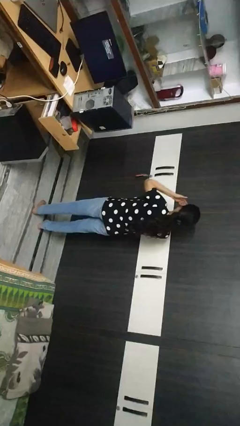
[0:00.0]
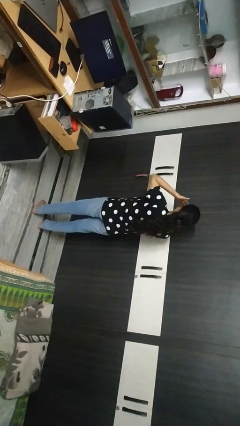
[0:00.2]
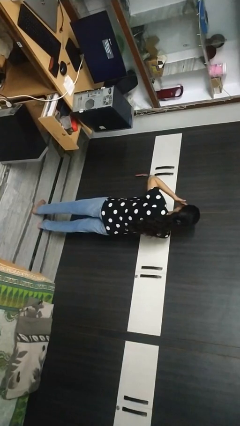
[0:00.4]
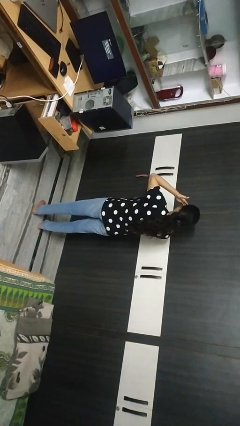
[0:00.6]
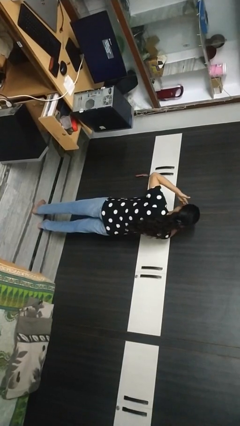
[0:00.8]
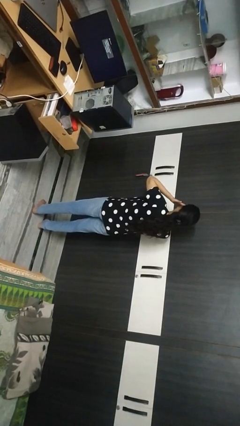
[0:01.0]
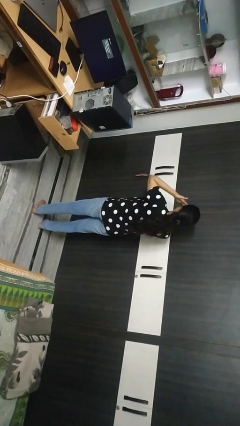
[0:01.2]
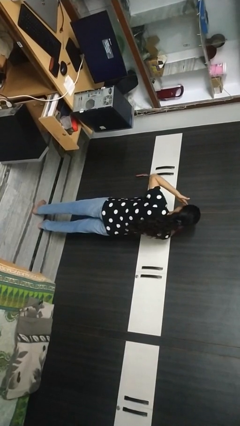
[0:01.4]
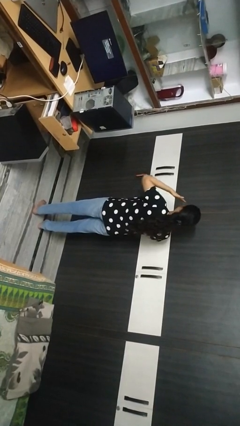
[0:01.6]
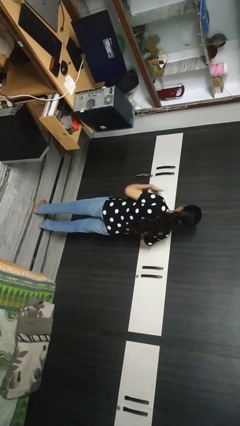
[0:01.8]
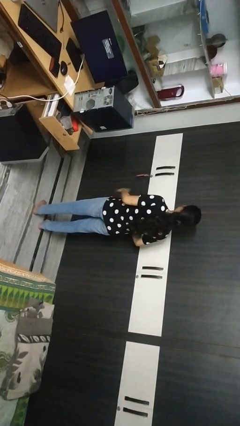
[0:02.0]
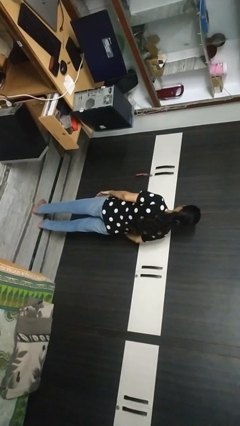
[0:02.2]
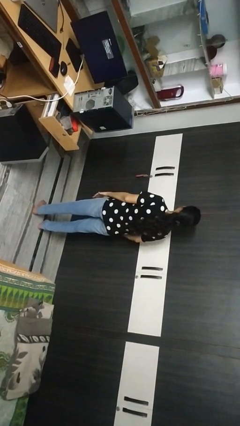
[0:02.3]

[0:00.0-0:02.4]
person rubs eyes

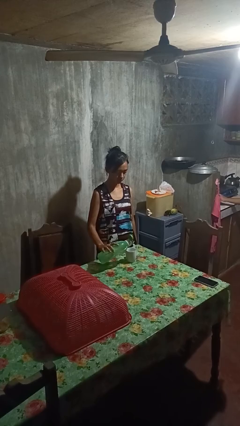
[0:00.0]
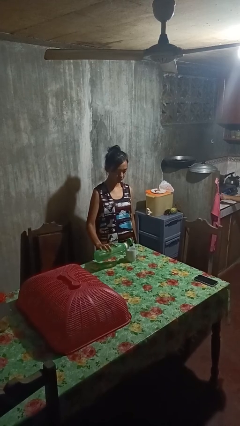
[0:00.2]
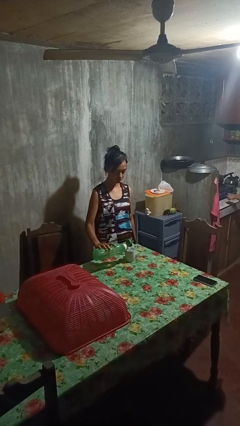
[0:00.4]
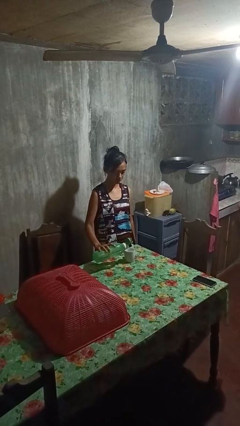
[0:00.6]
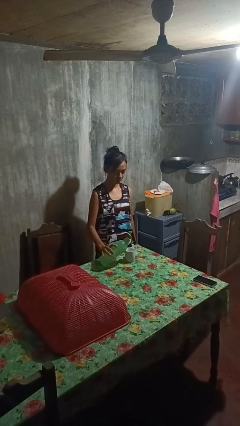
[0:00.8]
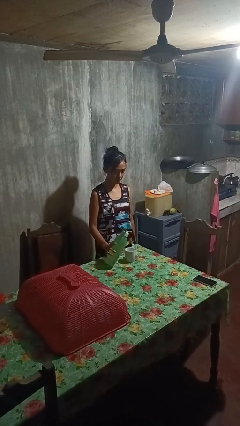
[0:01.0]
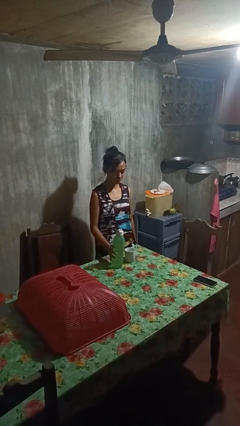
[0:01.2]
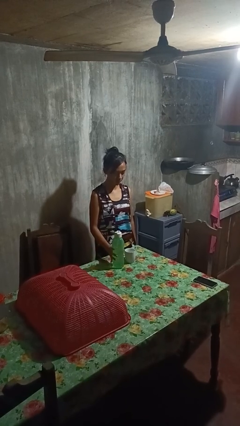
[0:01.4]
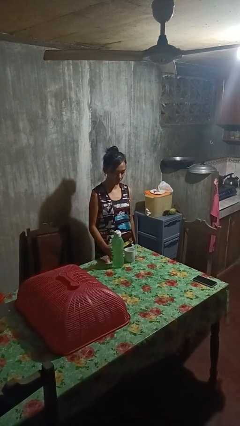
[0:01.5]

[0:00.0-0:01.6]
person pours liquid into cup

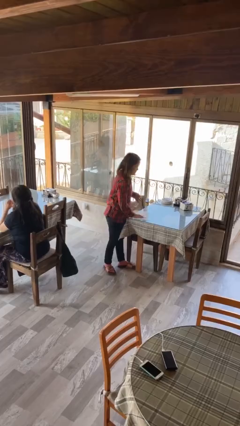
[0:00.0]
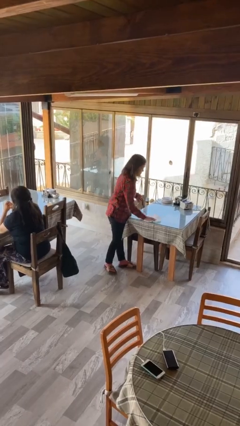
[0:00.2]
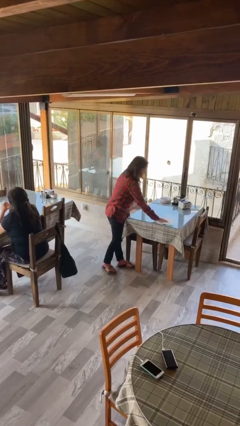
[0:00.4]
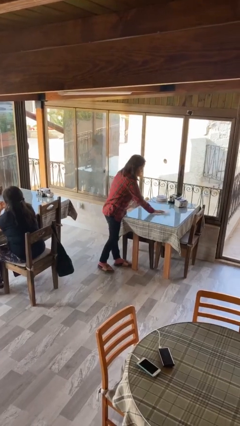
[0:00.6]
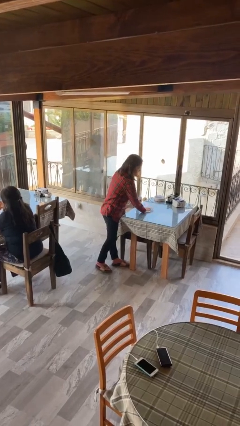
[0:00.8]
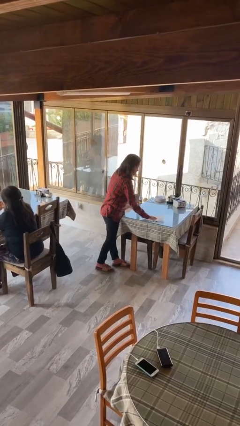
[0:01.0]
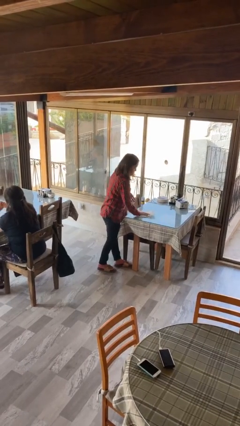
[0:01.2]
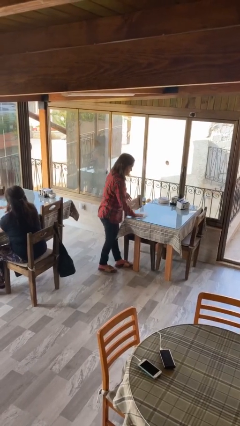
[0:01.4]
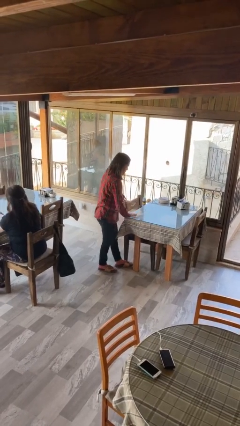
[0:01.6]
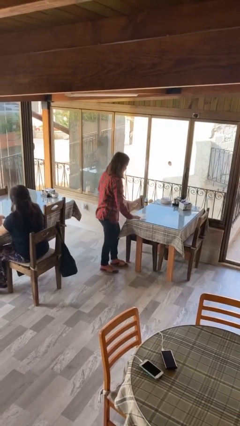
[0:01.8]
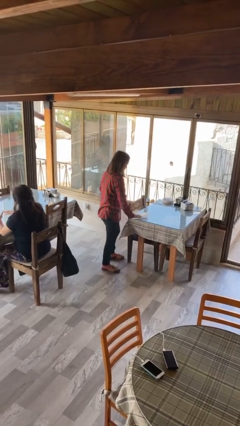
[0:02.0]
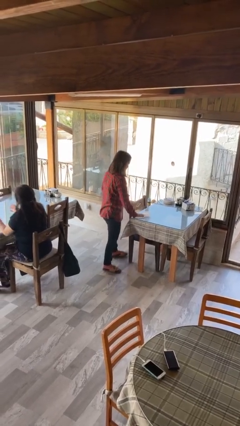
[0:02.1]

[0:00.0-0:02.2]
person cleans table with rag

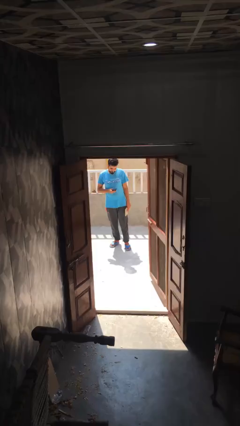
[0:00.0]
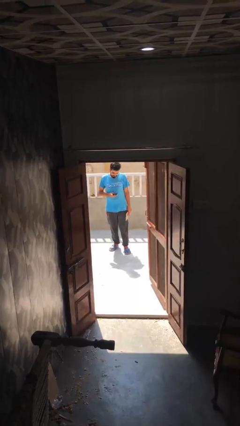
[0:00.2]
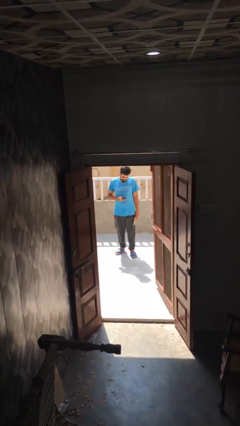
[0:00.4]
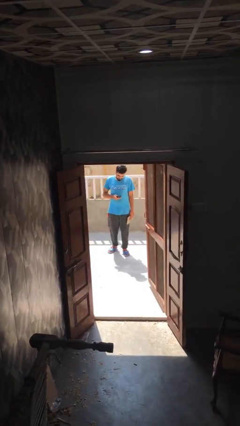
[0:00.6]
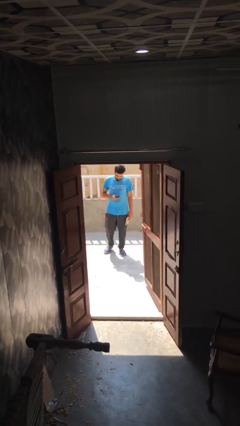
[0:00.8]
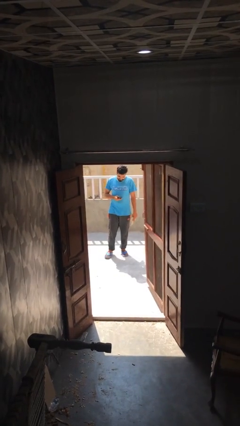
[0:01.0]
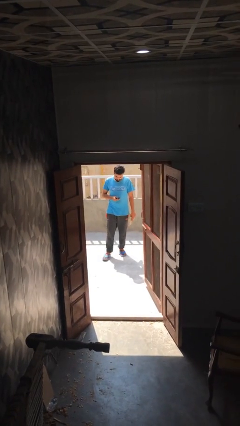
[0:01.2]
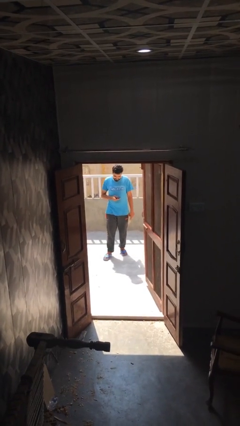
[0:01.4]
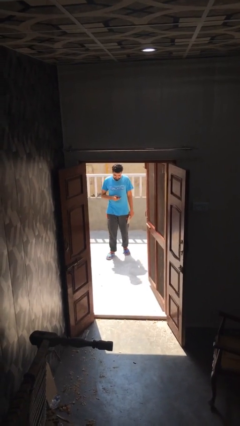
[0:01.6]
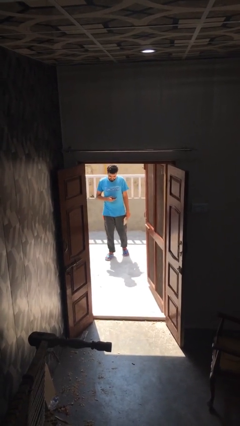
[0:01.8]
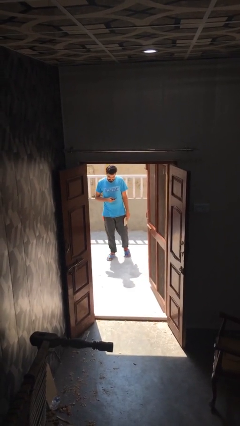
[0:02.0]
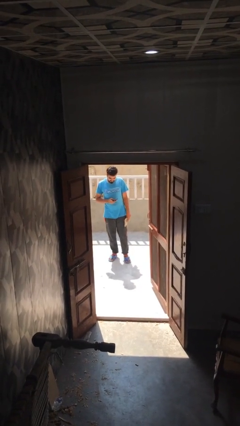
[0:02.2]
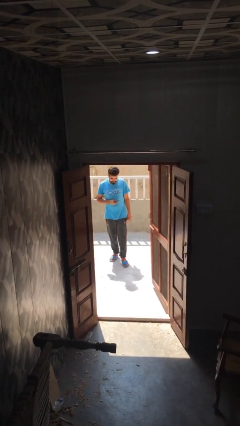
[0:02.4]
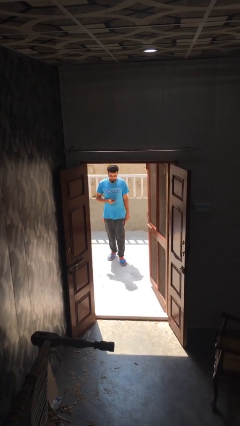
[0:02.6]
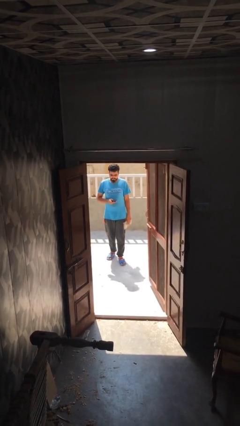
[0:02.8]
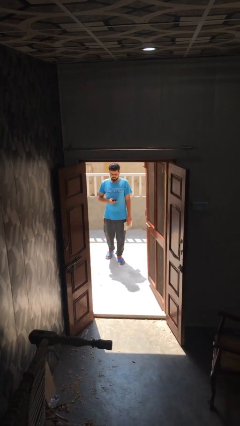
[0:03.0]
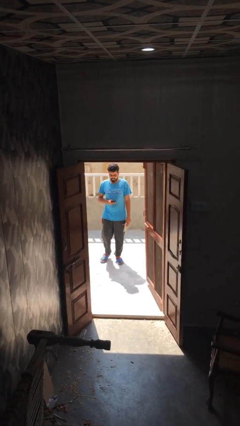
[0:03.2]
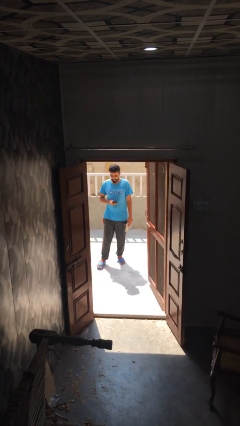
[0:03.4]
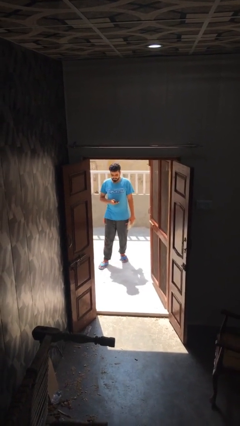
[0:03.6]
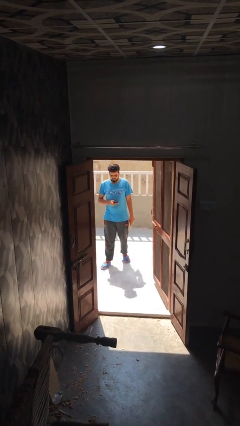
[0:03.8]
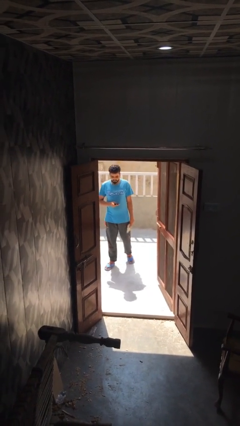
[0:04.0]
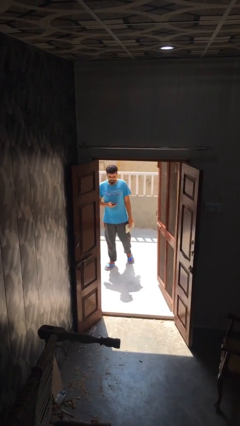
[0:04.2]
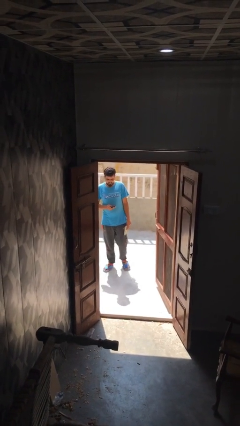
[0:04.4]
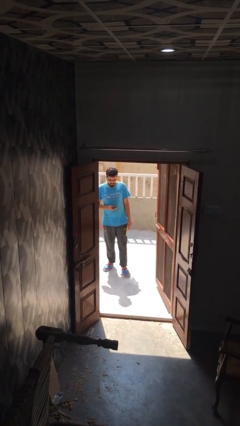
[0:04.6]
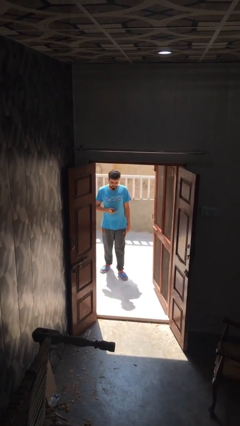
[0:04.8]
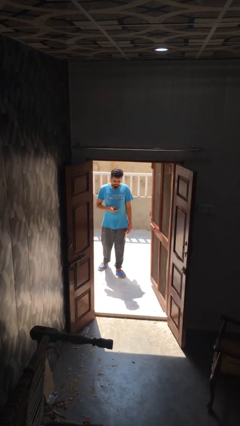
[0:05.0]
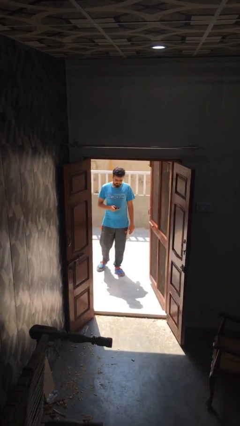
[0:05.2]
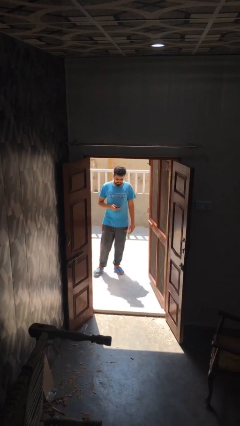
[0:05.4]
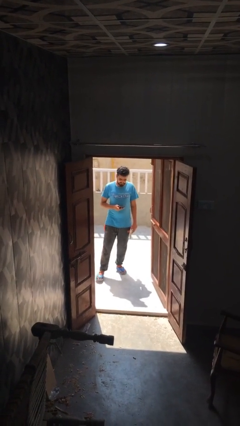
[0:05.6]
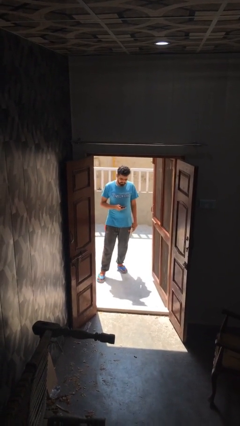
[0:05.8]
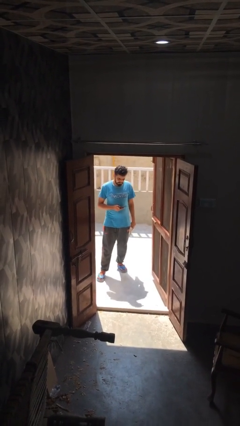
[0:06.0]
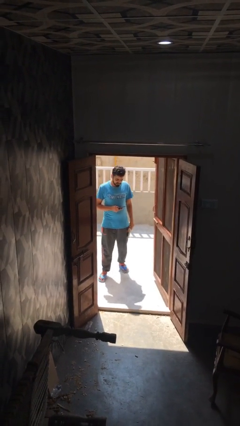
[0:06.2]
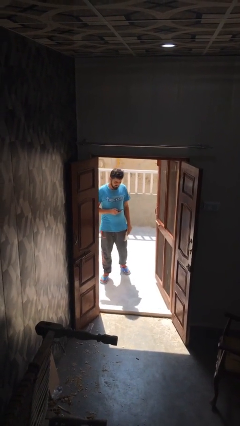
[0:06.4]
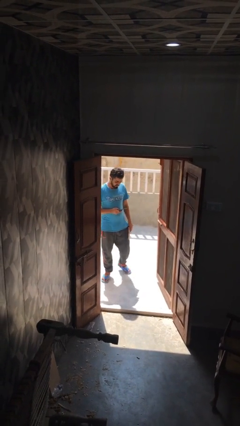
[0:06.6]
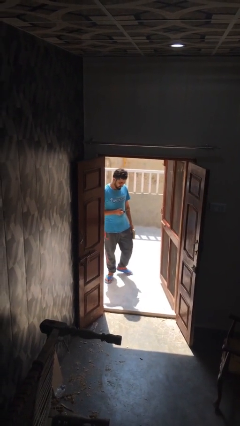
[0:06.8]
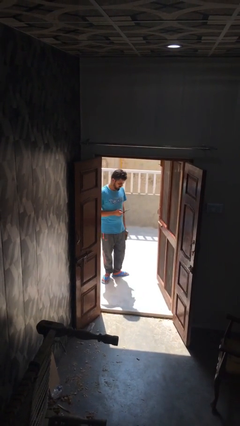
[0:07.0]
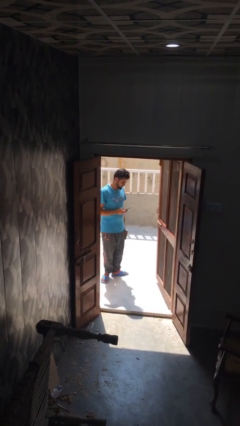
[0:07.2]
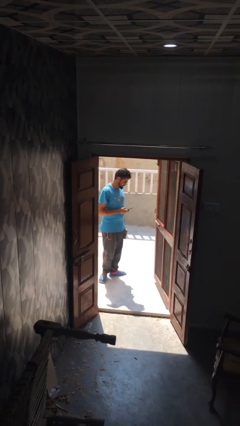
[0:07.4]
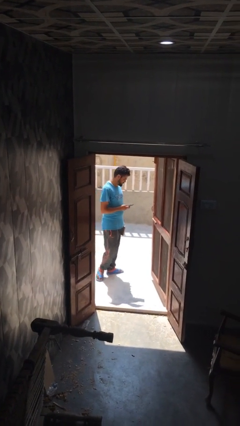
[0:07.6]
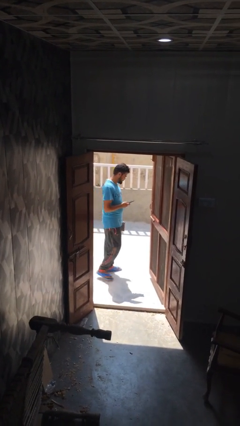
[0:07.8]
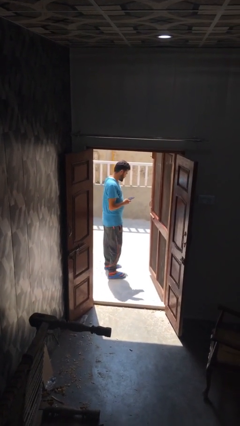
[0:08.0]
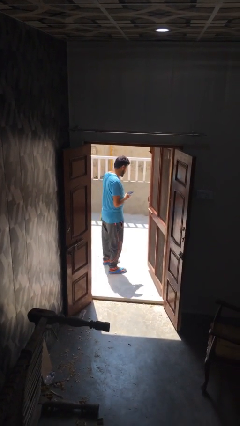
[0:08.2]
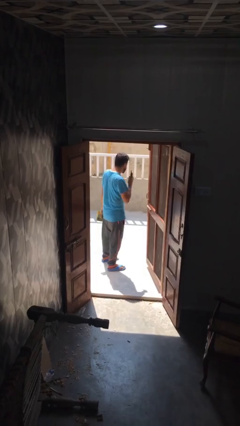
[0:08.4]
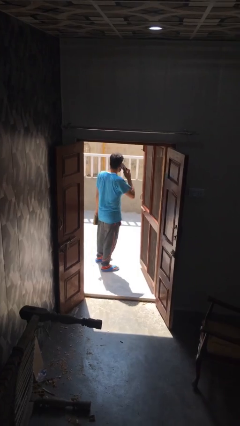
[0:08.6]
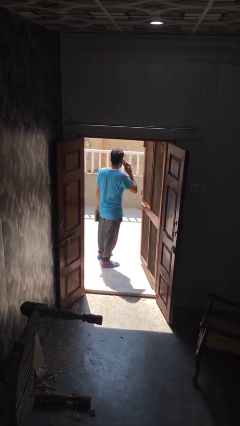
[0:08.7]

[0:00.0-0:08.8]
person texts on phone

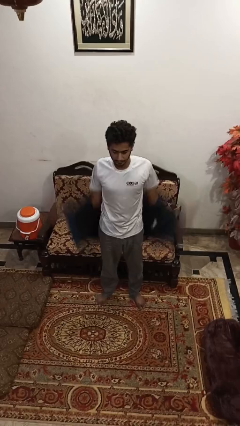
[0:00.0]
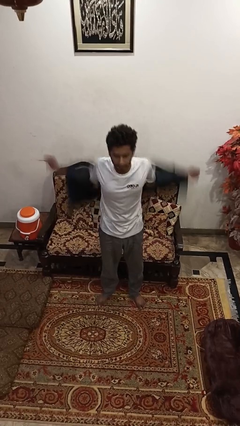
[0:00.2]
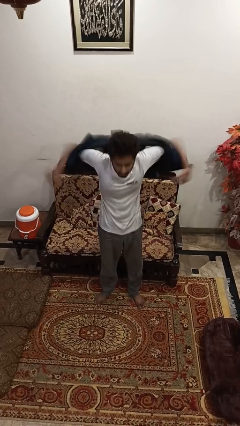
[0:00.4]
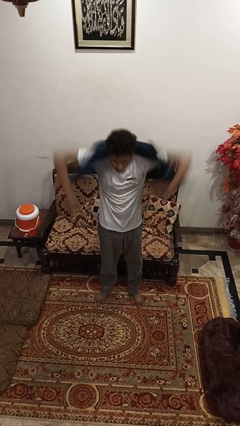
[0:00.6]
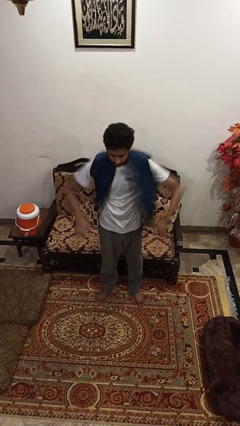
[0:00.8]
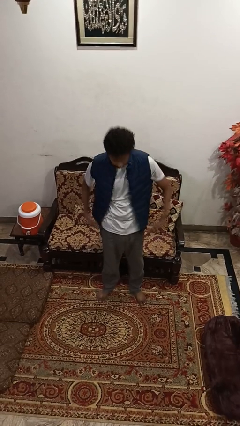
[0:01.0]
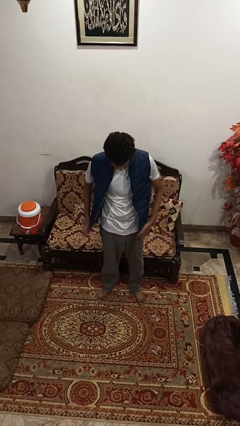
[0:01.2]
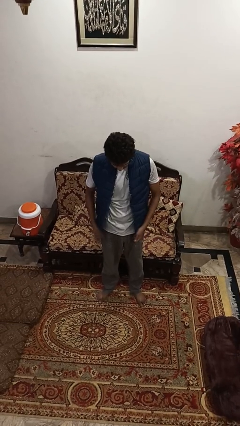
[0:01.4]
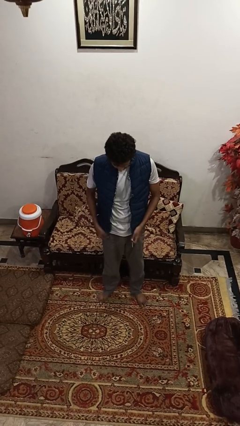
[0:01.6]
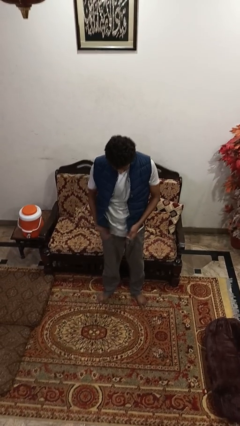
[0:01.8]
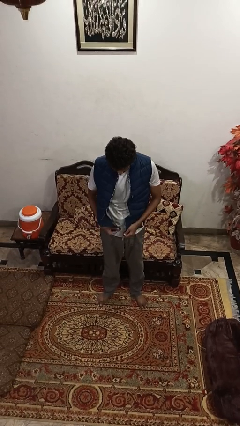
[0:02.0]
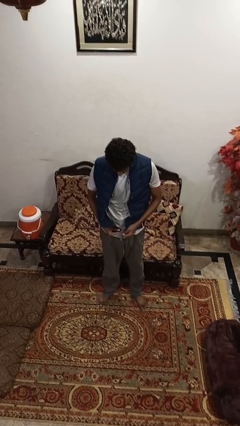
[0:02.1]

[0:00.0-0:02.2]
person puts on jacket
